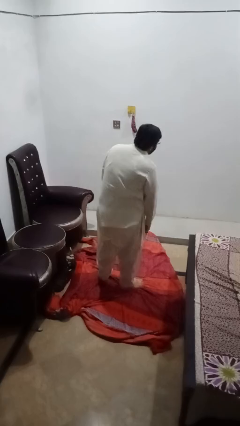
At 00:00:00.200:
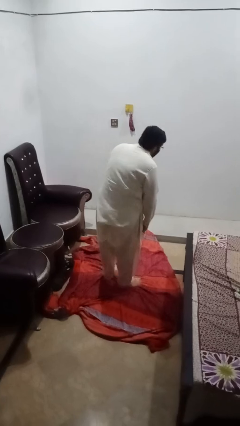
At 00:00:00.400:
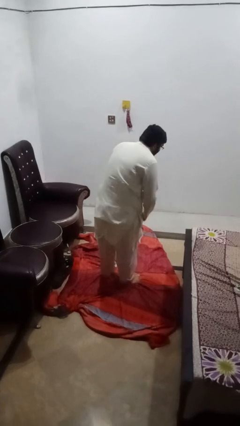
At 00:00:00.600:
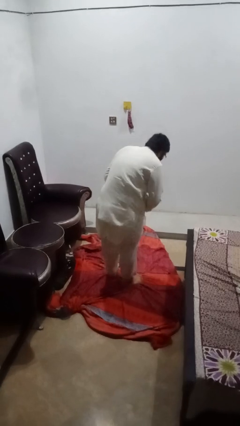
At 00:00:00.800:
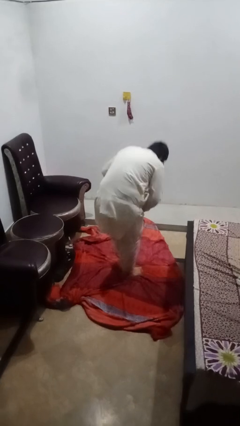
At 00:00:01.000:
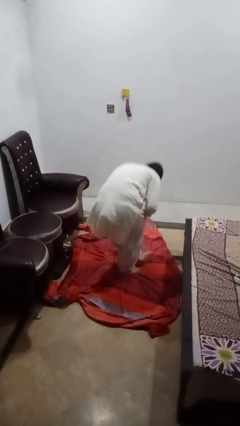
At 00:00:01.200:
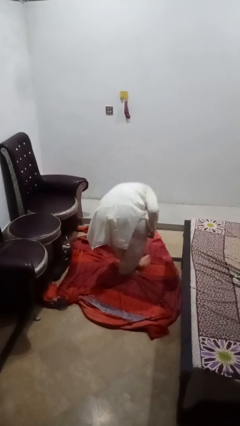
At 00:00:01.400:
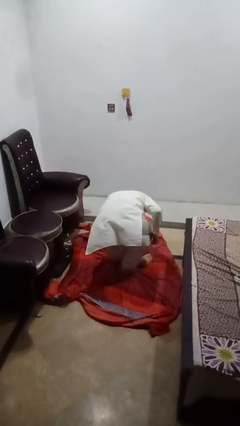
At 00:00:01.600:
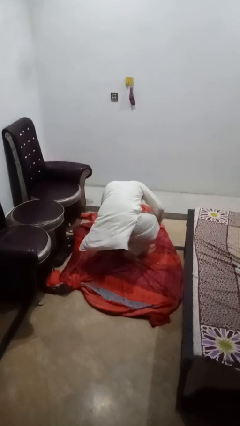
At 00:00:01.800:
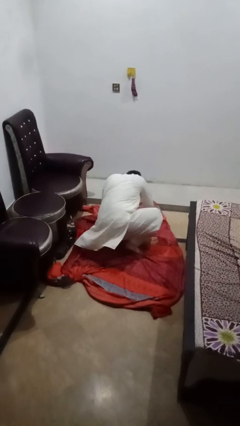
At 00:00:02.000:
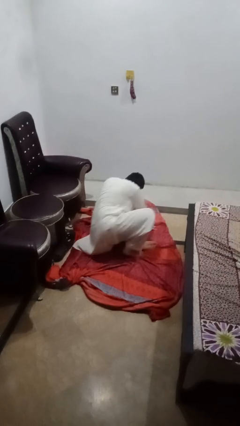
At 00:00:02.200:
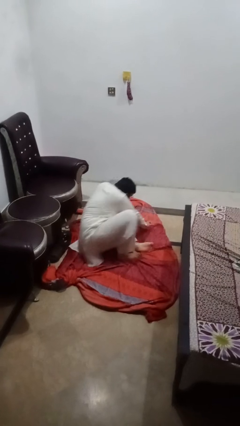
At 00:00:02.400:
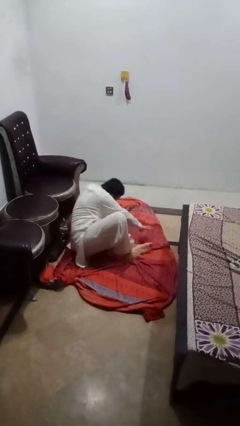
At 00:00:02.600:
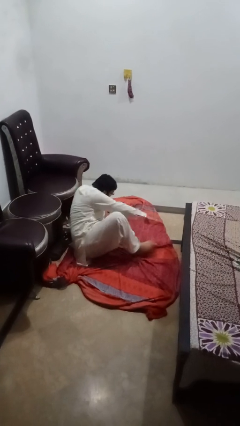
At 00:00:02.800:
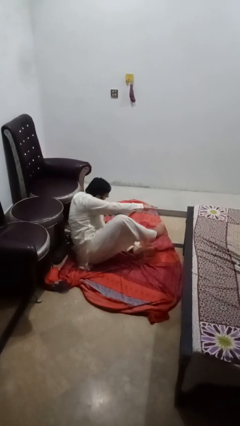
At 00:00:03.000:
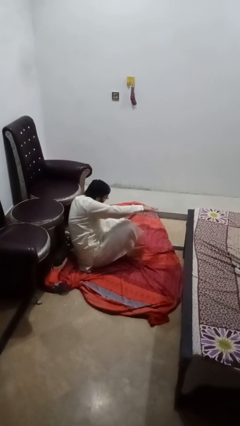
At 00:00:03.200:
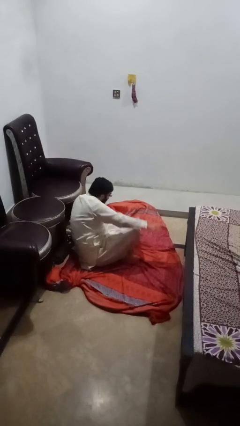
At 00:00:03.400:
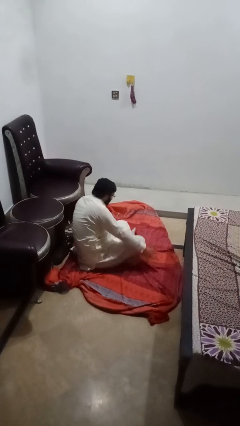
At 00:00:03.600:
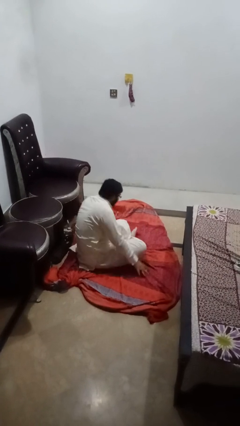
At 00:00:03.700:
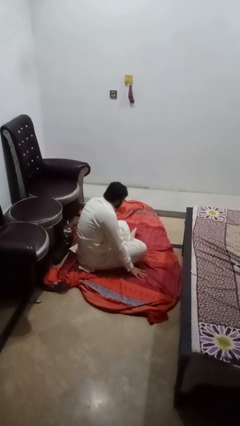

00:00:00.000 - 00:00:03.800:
person sits crisscross

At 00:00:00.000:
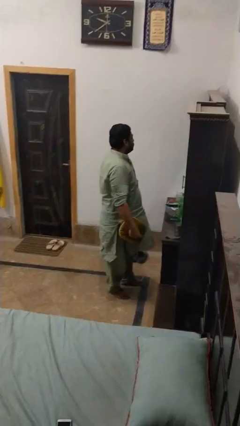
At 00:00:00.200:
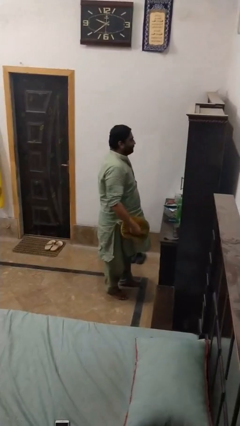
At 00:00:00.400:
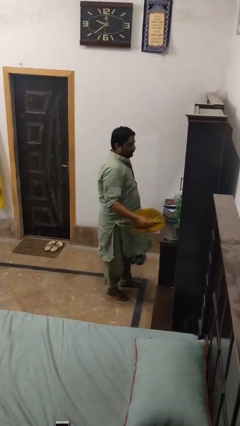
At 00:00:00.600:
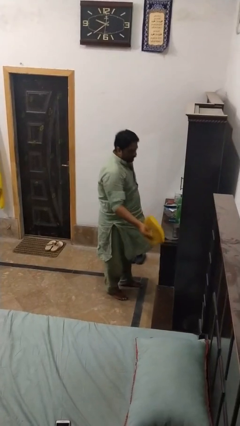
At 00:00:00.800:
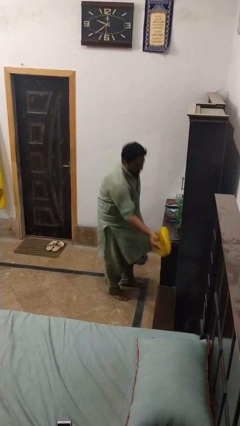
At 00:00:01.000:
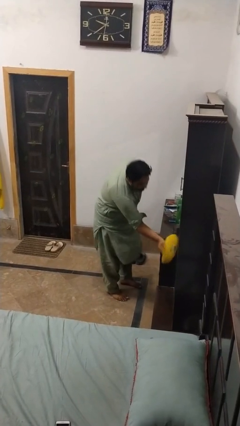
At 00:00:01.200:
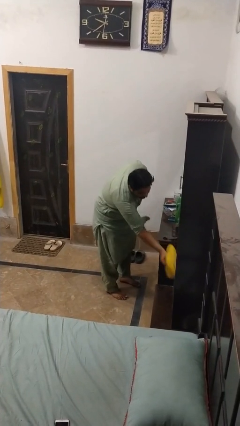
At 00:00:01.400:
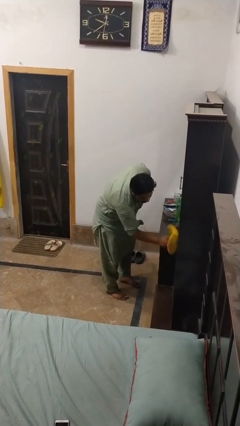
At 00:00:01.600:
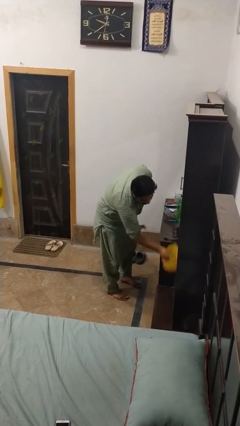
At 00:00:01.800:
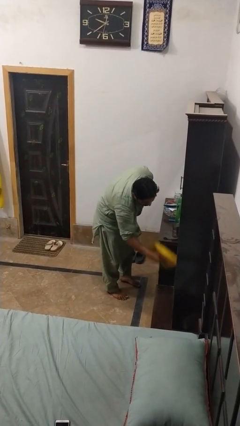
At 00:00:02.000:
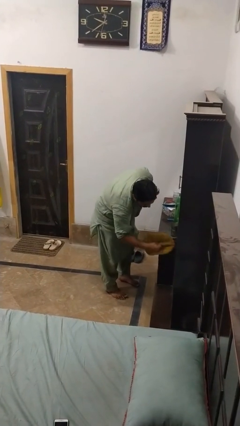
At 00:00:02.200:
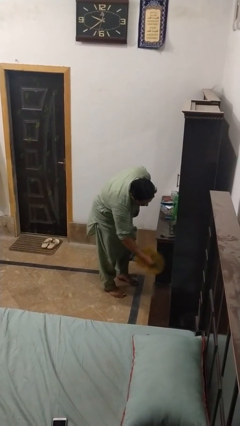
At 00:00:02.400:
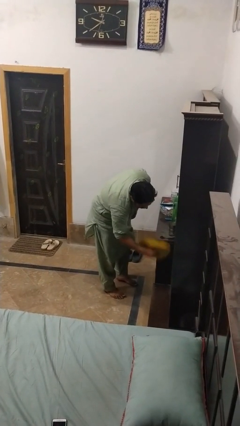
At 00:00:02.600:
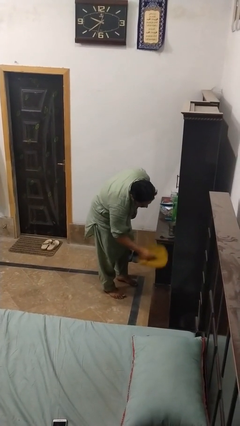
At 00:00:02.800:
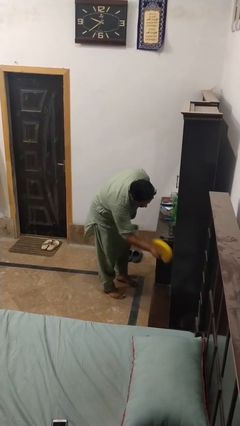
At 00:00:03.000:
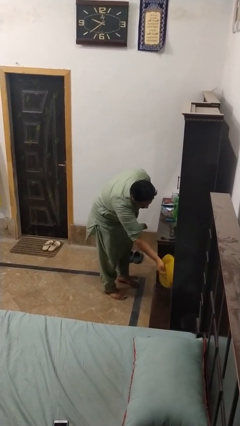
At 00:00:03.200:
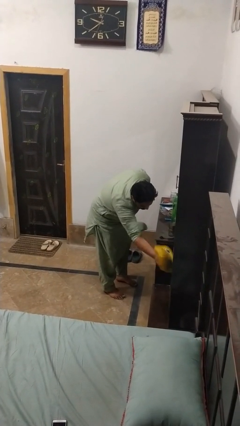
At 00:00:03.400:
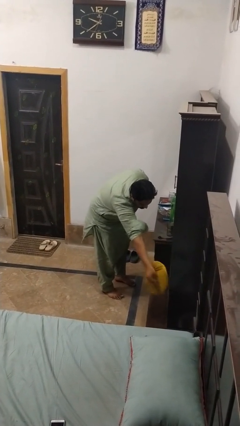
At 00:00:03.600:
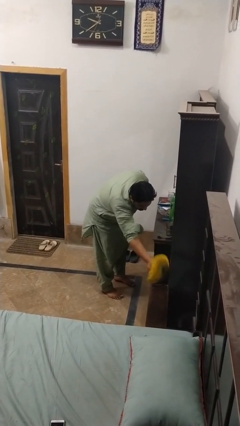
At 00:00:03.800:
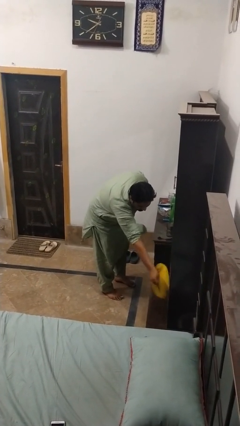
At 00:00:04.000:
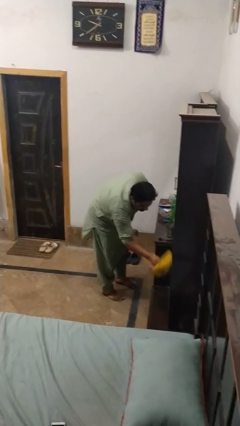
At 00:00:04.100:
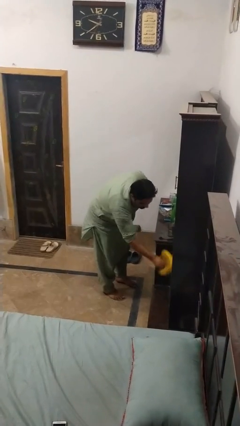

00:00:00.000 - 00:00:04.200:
person dusts furniture

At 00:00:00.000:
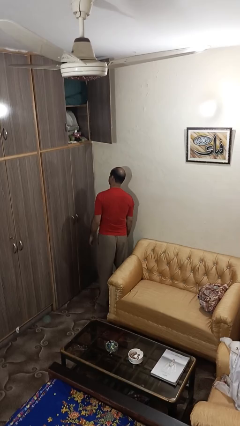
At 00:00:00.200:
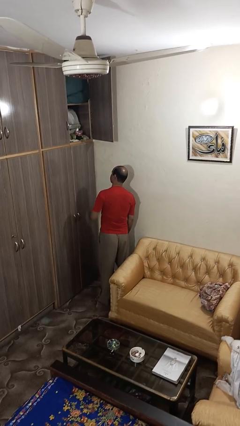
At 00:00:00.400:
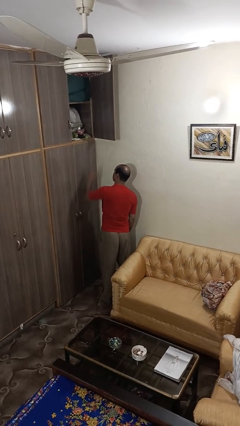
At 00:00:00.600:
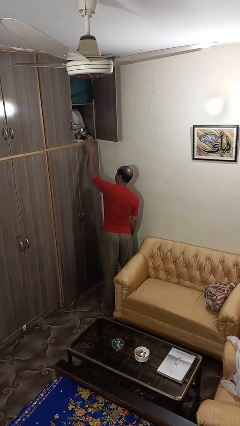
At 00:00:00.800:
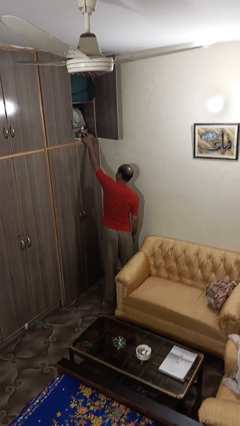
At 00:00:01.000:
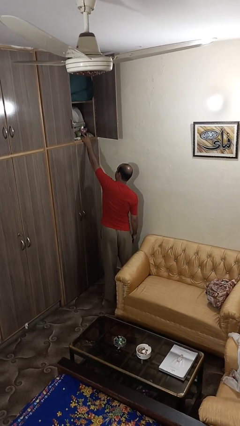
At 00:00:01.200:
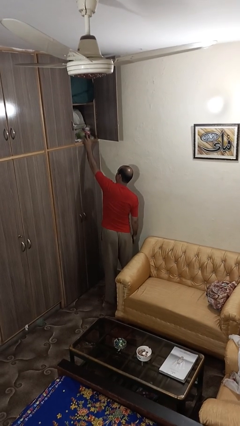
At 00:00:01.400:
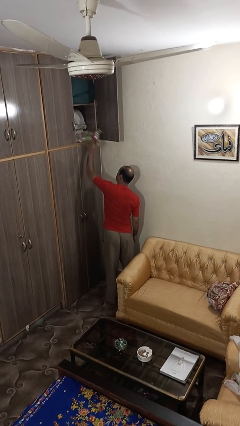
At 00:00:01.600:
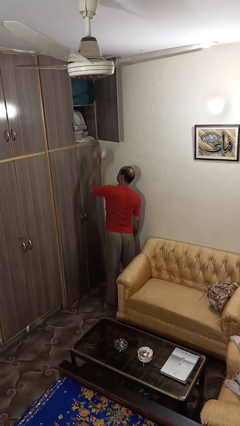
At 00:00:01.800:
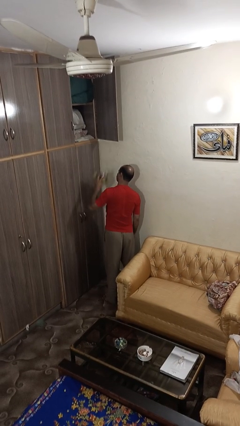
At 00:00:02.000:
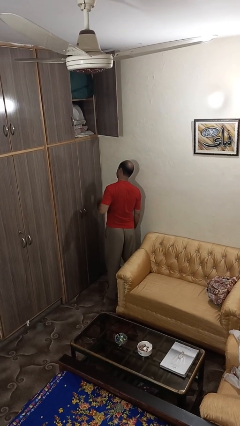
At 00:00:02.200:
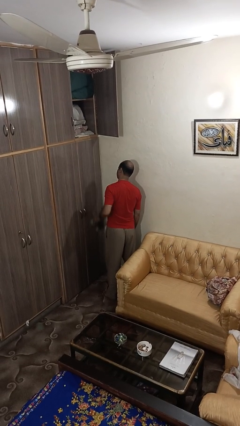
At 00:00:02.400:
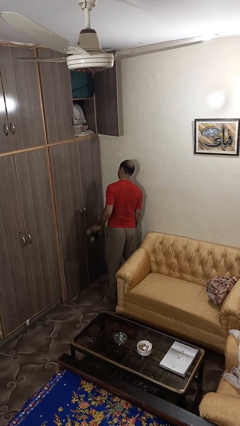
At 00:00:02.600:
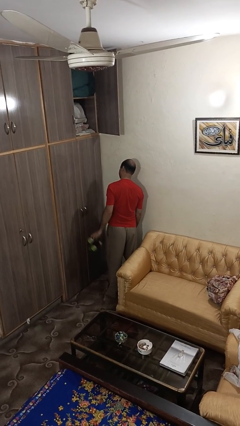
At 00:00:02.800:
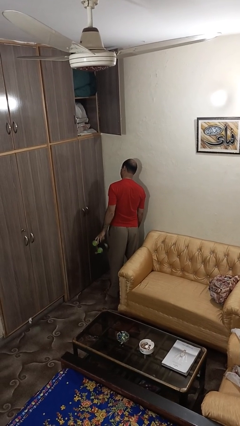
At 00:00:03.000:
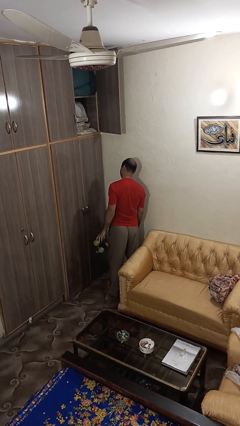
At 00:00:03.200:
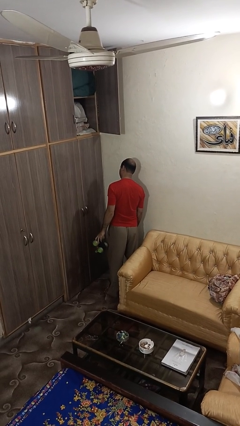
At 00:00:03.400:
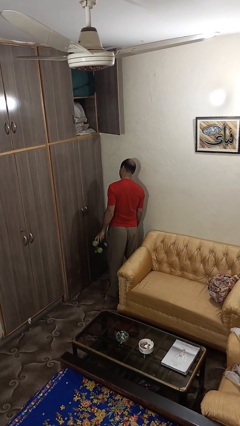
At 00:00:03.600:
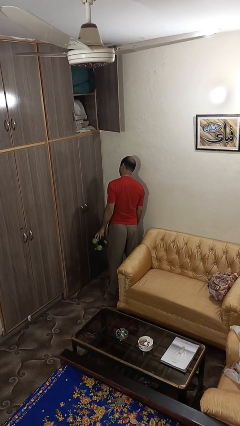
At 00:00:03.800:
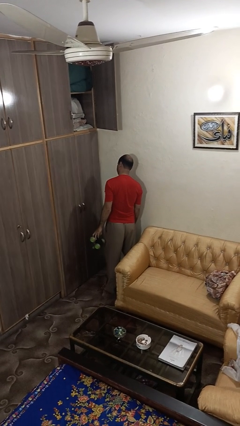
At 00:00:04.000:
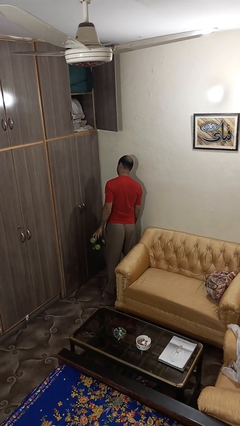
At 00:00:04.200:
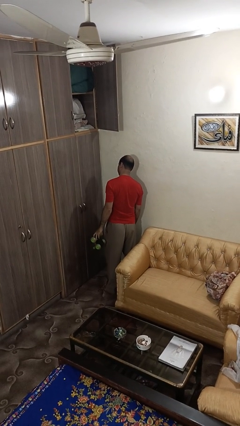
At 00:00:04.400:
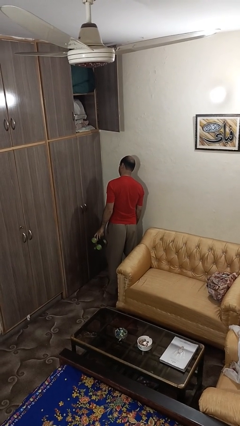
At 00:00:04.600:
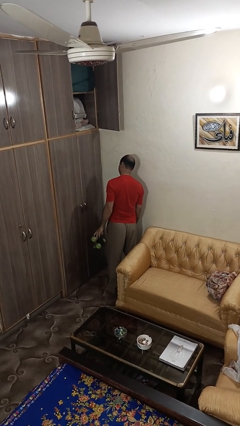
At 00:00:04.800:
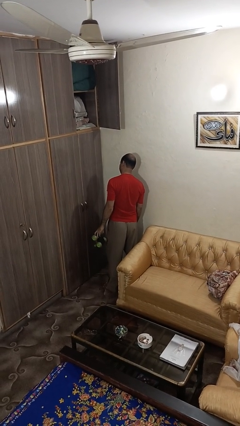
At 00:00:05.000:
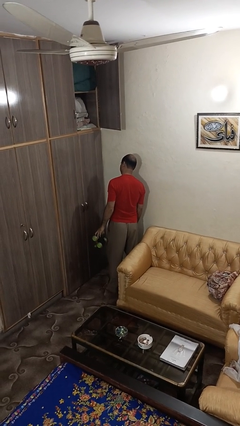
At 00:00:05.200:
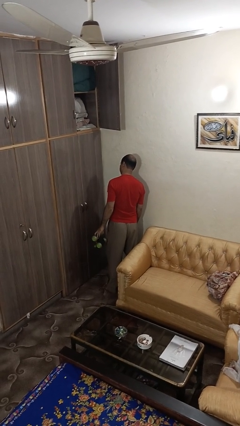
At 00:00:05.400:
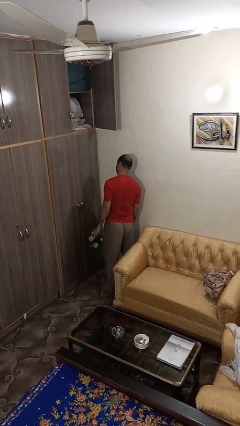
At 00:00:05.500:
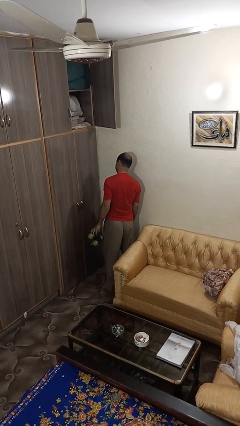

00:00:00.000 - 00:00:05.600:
person picks up object from shelf

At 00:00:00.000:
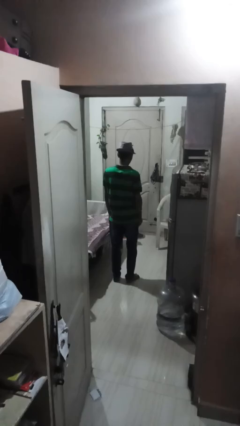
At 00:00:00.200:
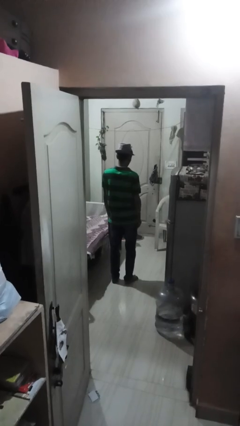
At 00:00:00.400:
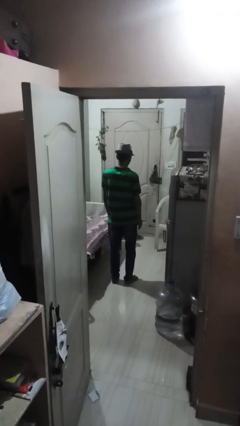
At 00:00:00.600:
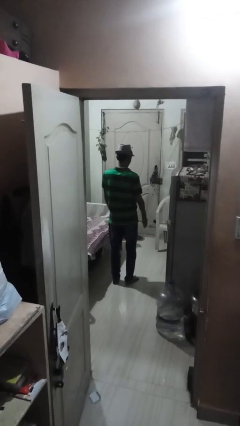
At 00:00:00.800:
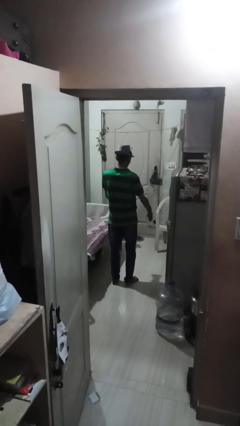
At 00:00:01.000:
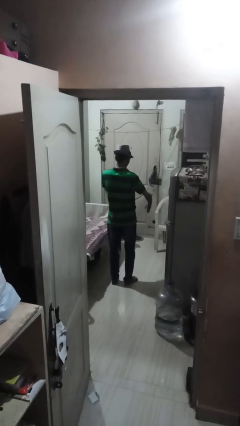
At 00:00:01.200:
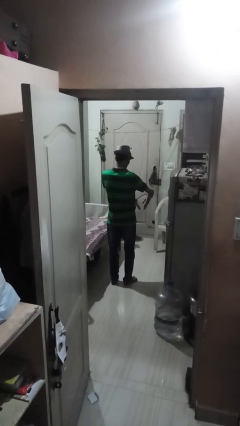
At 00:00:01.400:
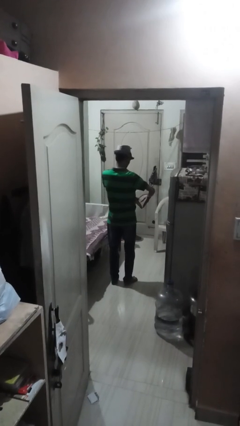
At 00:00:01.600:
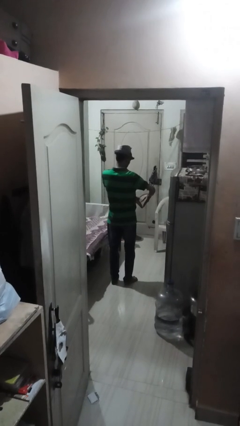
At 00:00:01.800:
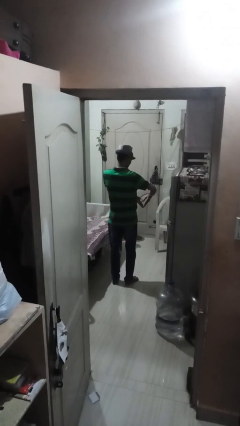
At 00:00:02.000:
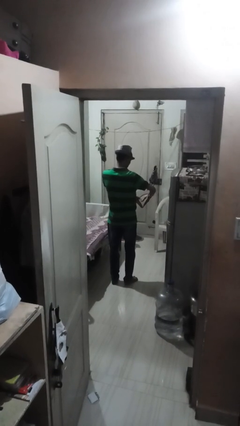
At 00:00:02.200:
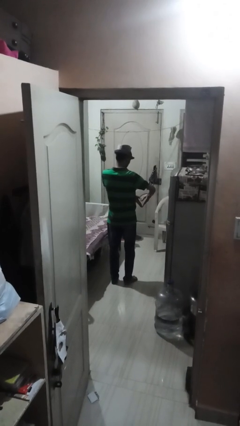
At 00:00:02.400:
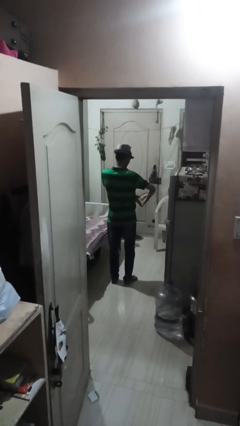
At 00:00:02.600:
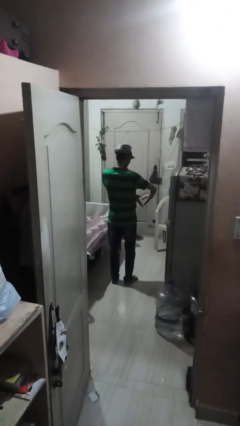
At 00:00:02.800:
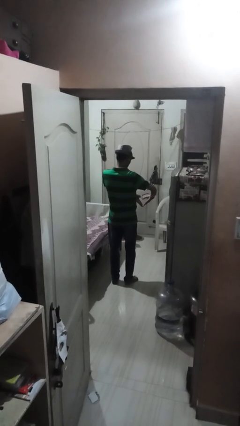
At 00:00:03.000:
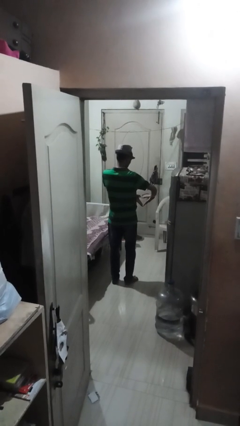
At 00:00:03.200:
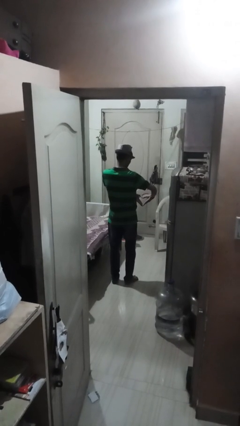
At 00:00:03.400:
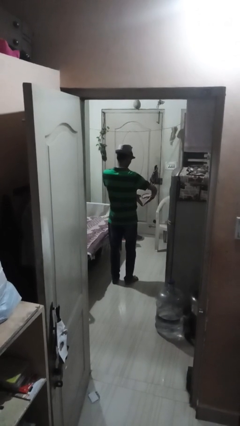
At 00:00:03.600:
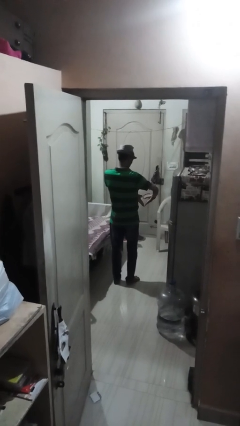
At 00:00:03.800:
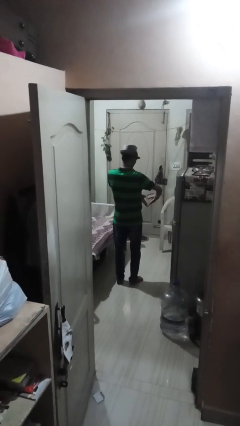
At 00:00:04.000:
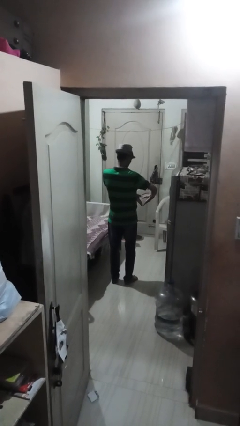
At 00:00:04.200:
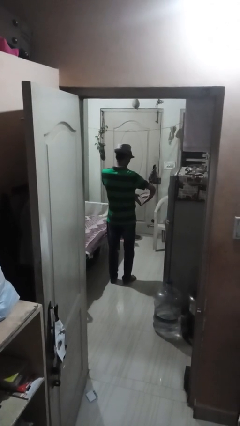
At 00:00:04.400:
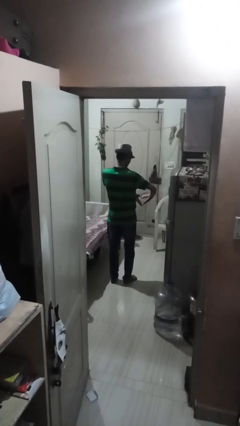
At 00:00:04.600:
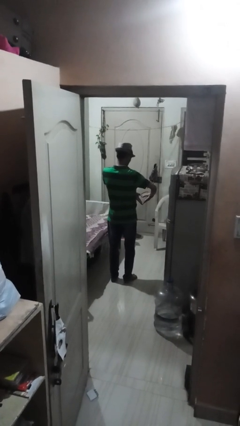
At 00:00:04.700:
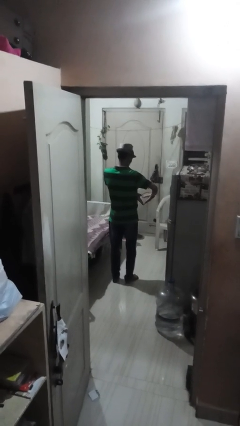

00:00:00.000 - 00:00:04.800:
person gestures heart
